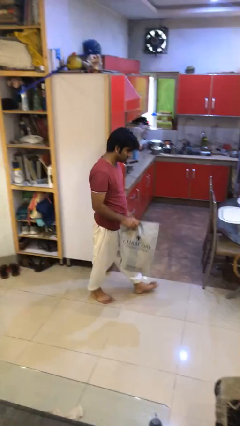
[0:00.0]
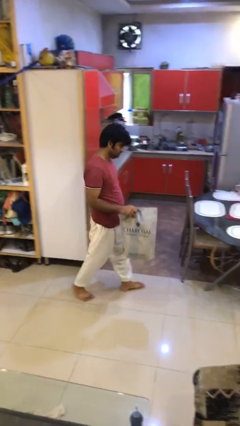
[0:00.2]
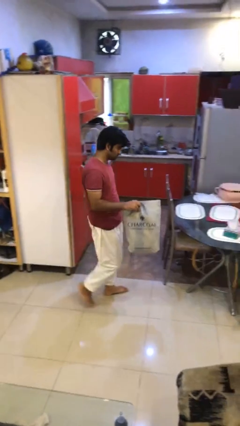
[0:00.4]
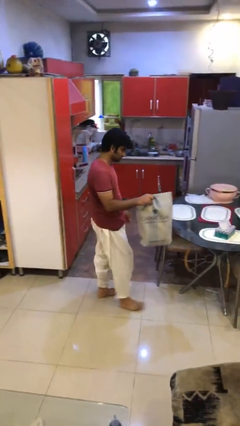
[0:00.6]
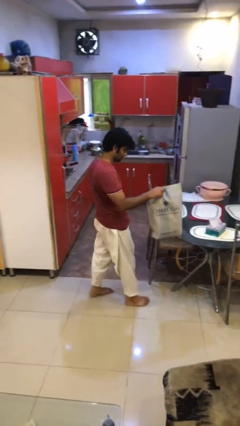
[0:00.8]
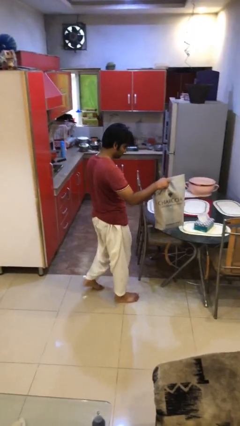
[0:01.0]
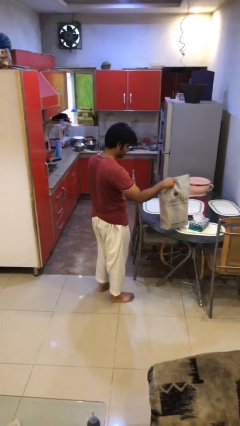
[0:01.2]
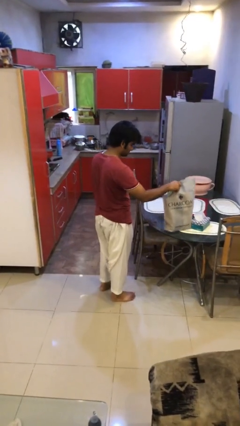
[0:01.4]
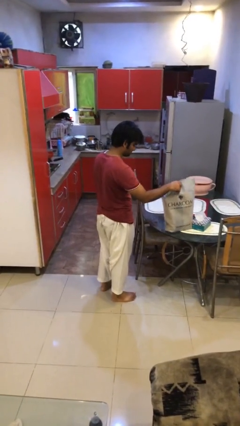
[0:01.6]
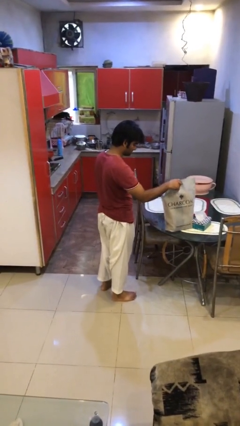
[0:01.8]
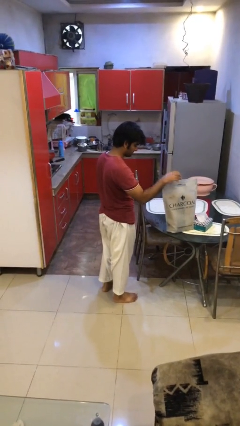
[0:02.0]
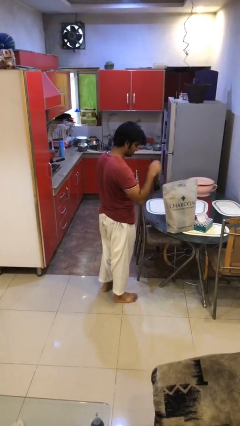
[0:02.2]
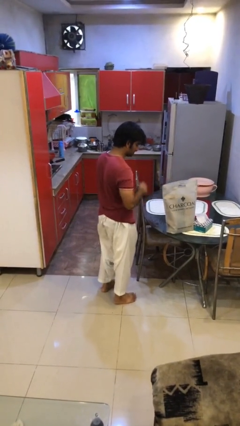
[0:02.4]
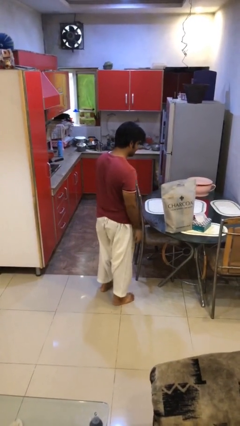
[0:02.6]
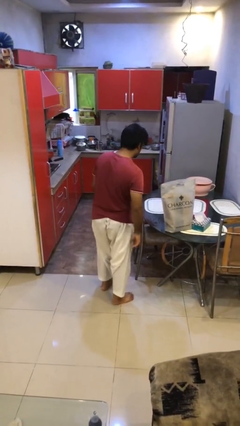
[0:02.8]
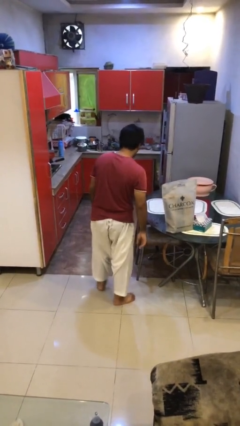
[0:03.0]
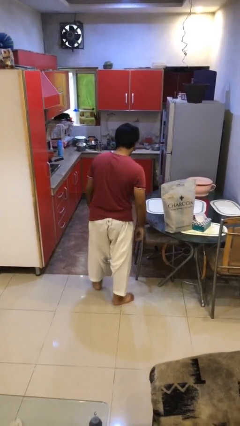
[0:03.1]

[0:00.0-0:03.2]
person puts down object on table

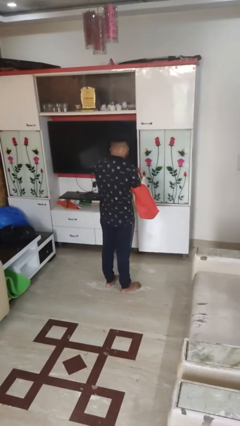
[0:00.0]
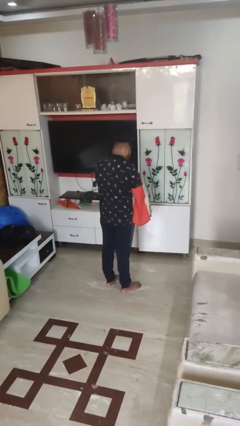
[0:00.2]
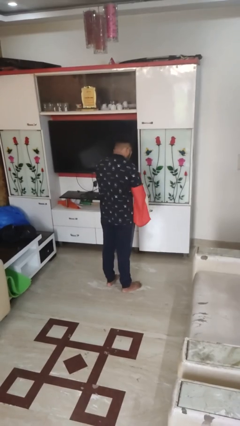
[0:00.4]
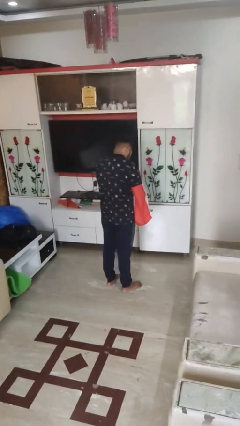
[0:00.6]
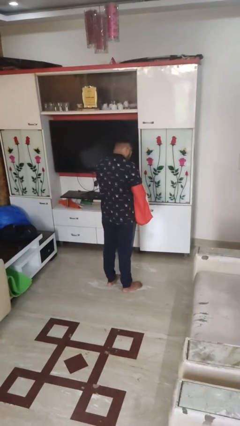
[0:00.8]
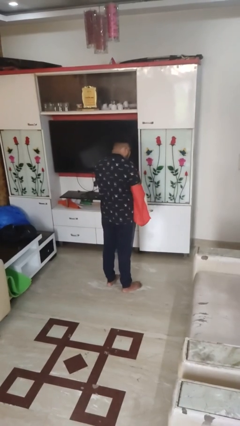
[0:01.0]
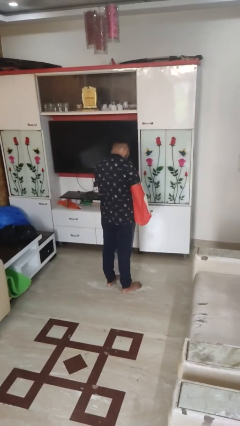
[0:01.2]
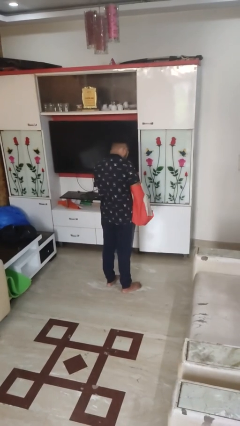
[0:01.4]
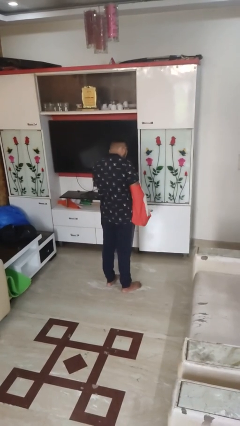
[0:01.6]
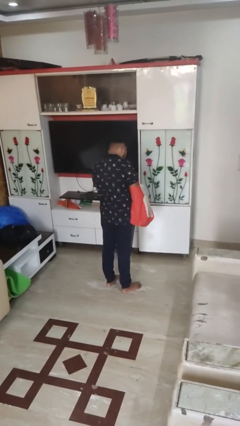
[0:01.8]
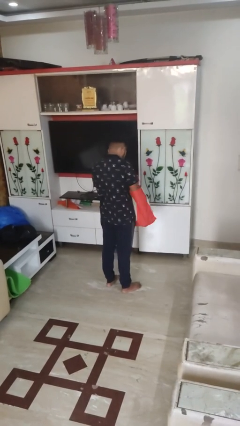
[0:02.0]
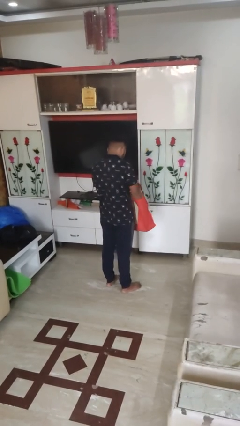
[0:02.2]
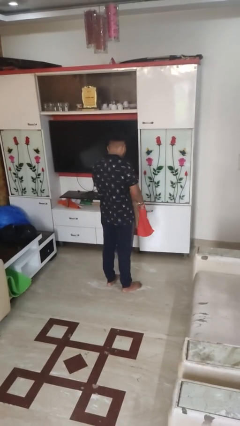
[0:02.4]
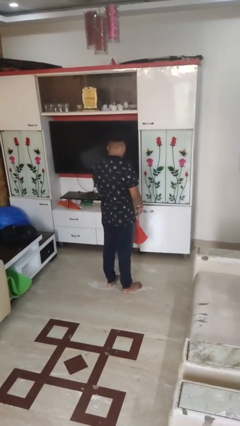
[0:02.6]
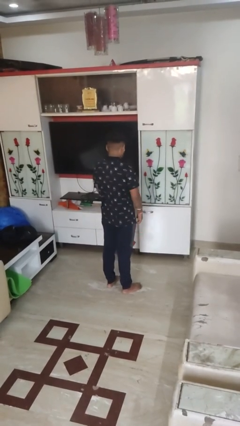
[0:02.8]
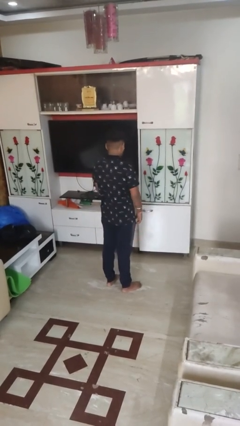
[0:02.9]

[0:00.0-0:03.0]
person searches in bag

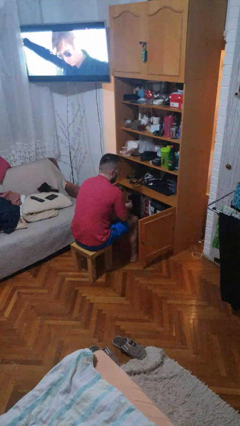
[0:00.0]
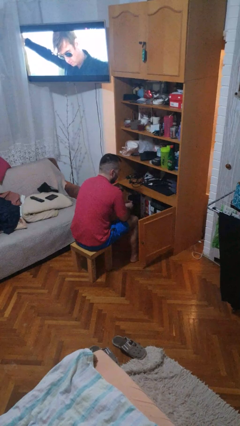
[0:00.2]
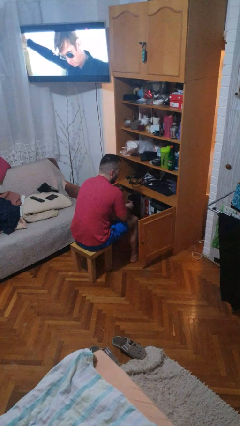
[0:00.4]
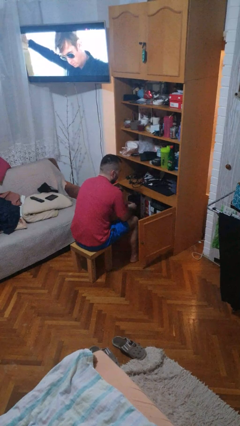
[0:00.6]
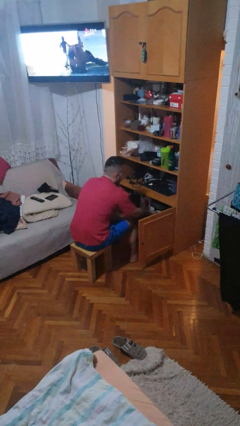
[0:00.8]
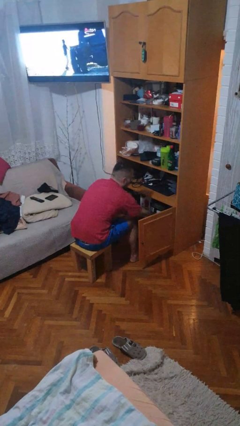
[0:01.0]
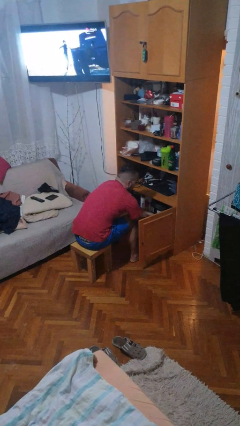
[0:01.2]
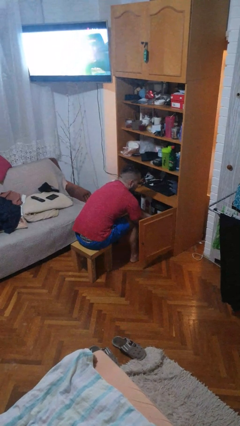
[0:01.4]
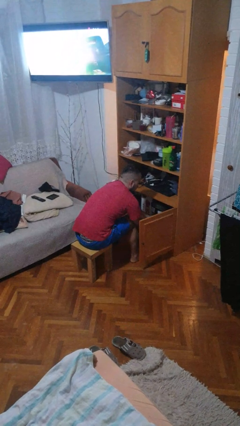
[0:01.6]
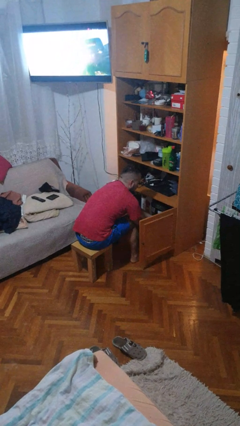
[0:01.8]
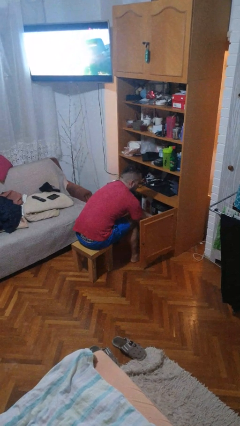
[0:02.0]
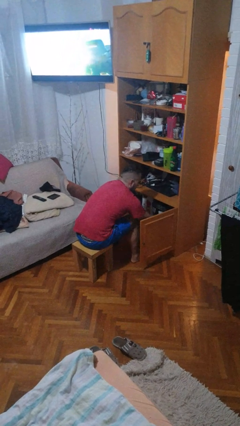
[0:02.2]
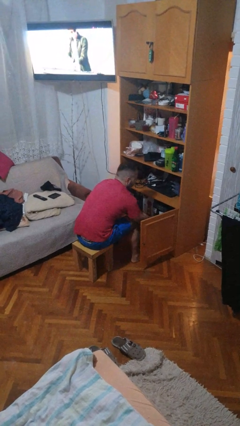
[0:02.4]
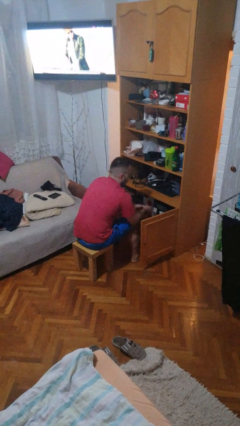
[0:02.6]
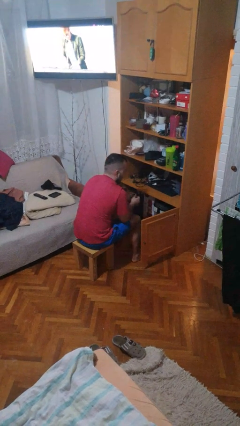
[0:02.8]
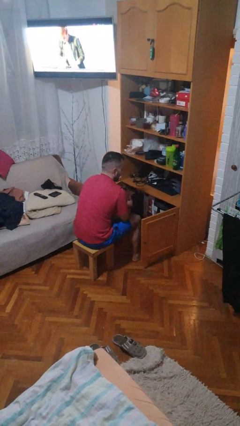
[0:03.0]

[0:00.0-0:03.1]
person searches in cabinet

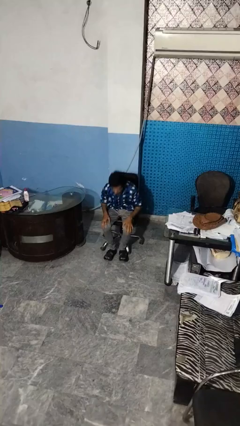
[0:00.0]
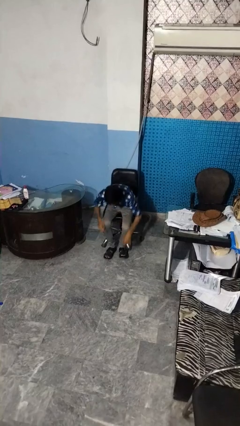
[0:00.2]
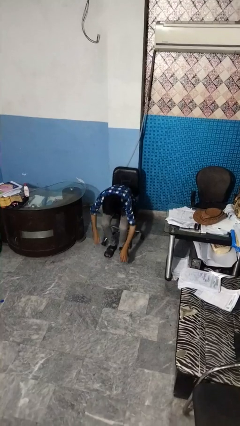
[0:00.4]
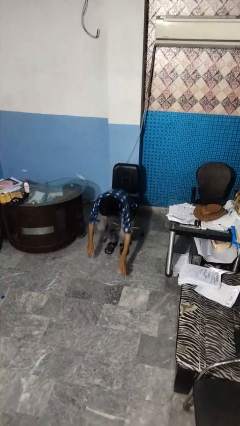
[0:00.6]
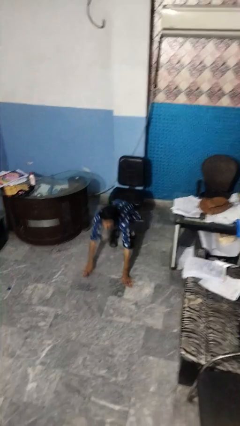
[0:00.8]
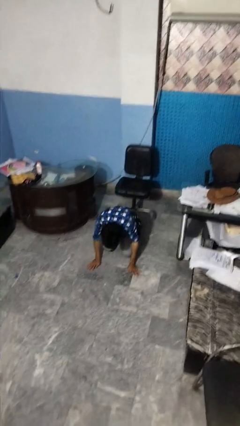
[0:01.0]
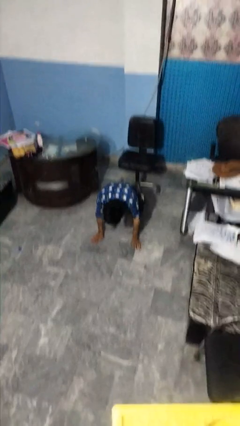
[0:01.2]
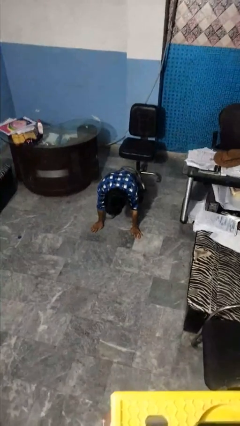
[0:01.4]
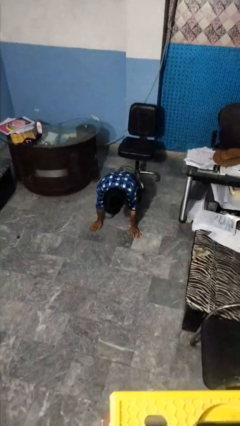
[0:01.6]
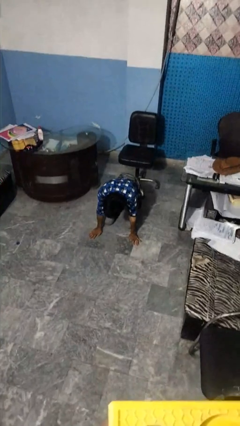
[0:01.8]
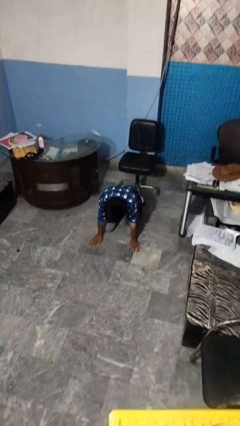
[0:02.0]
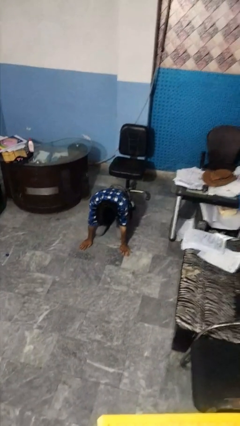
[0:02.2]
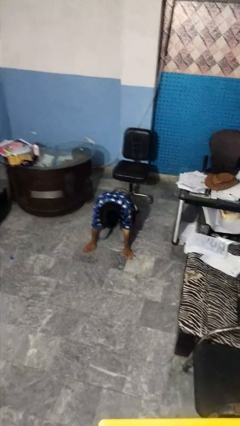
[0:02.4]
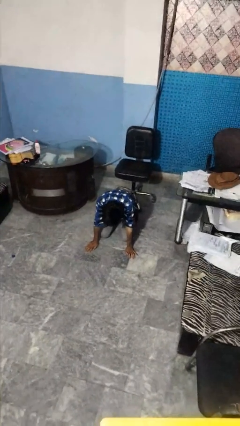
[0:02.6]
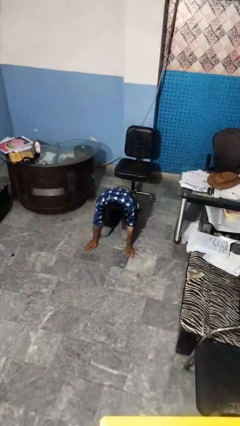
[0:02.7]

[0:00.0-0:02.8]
person falls from chair

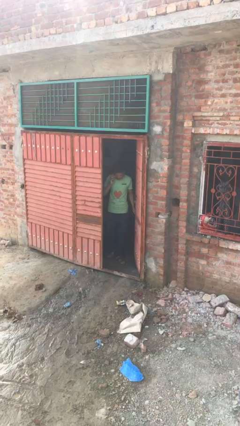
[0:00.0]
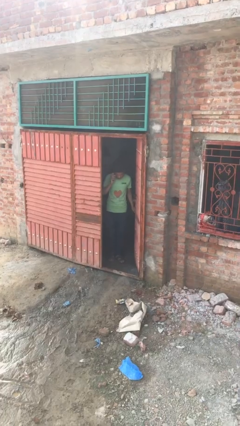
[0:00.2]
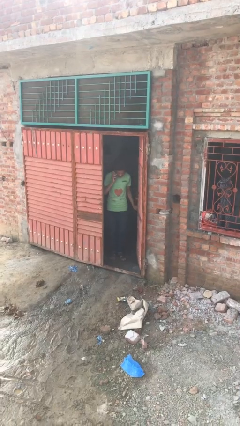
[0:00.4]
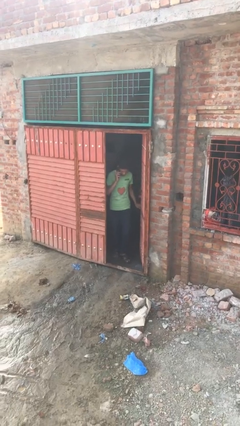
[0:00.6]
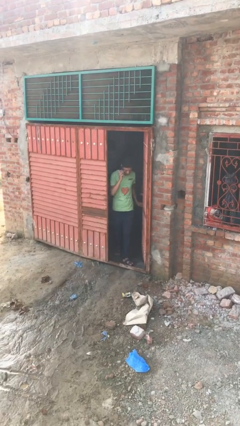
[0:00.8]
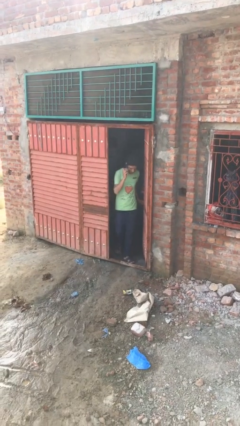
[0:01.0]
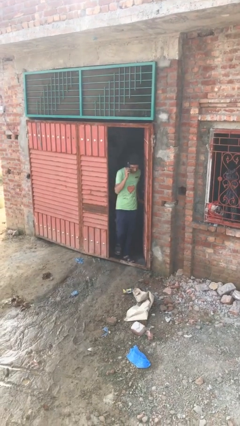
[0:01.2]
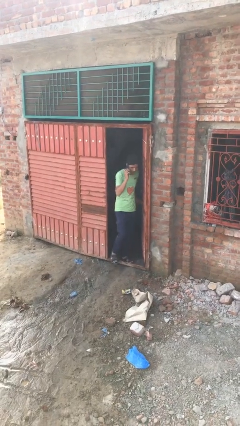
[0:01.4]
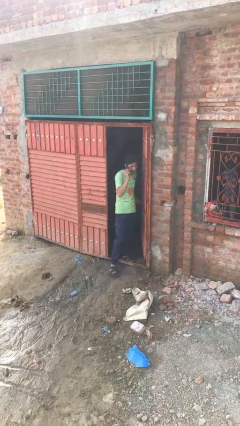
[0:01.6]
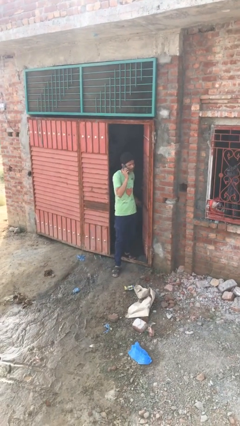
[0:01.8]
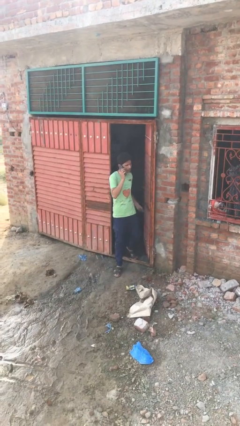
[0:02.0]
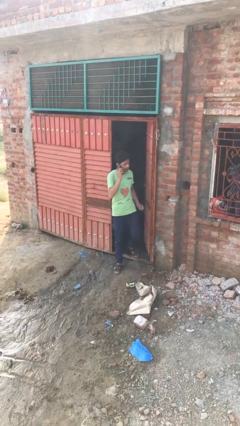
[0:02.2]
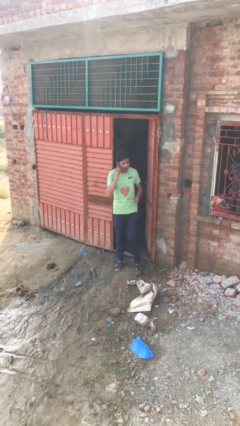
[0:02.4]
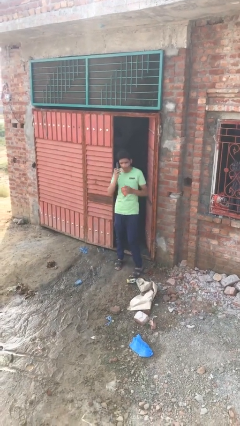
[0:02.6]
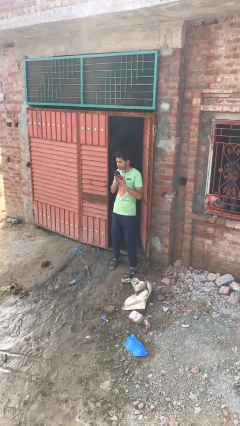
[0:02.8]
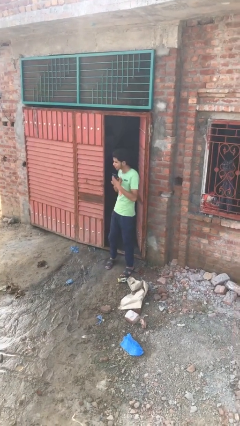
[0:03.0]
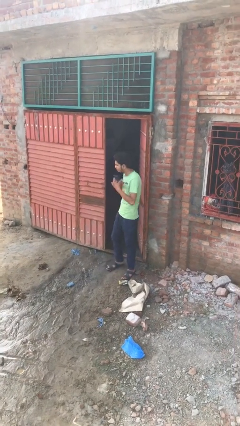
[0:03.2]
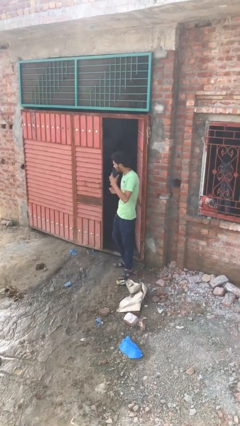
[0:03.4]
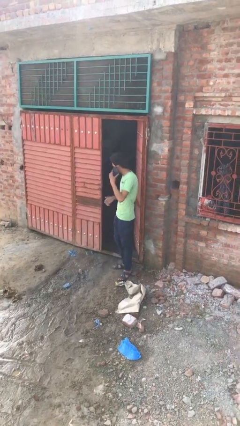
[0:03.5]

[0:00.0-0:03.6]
person enters scene through structure

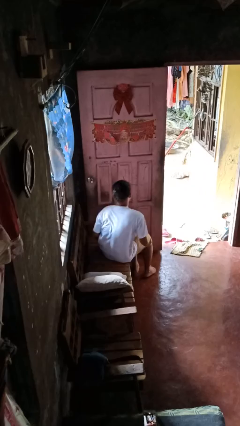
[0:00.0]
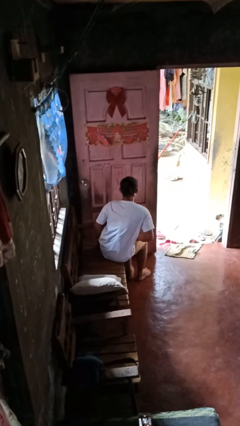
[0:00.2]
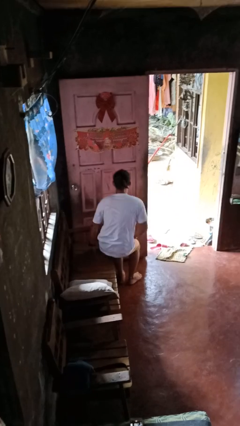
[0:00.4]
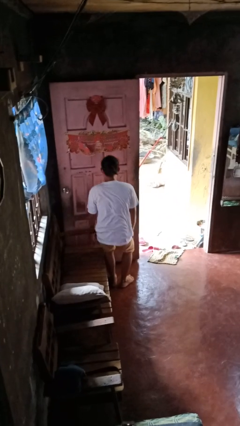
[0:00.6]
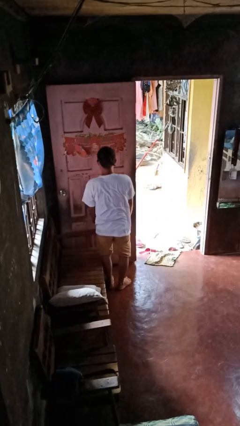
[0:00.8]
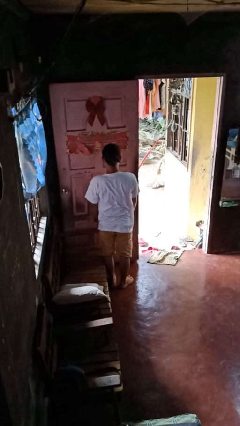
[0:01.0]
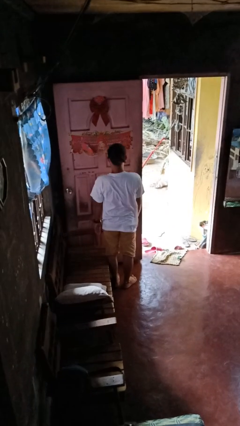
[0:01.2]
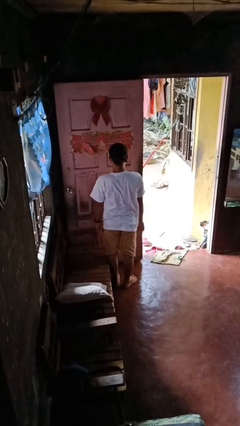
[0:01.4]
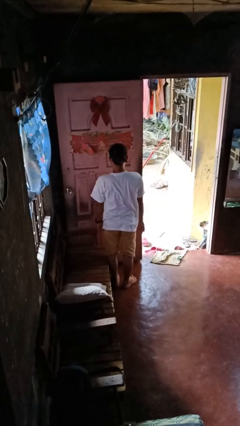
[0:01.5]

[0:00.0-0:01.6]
person stands up
